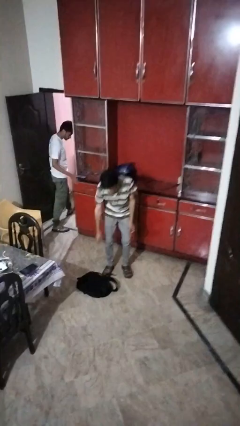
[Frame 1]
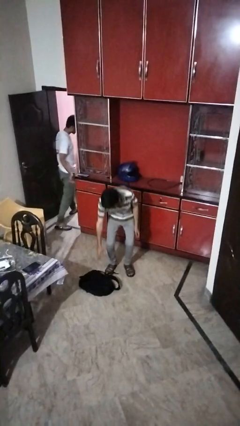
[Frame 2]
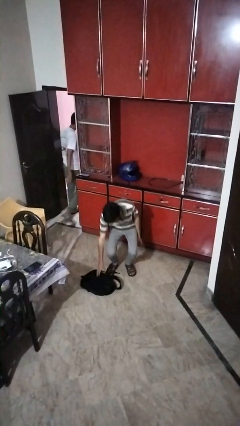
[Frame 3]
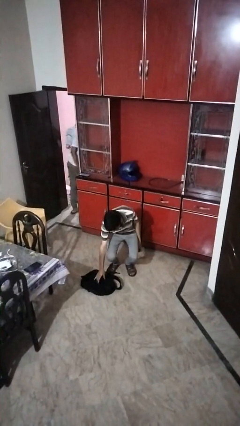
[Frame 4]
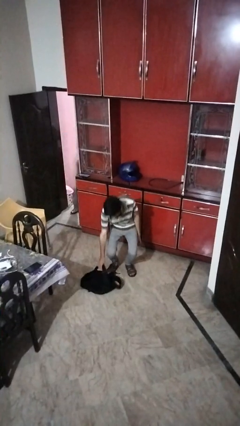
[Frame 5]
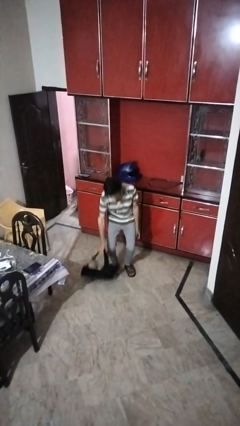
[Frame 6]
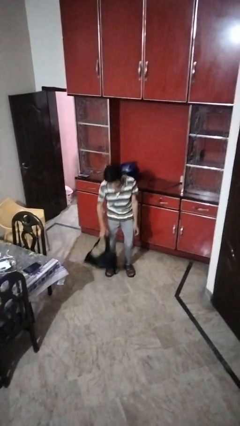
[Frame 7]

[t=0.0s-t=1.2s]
person picks up object from floor

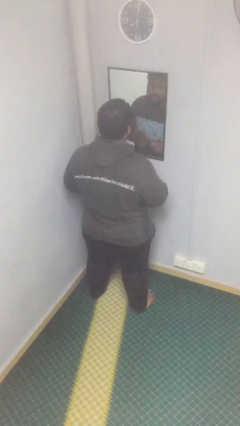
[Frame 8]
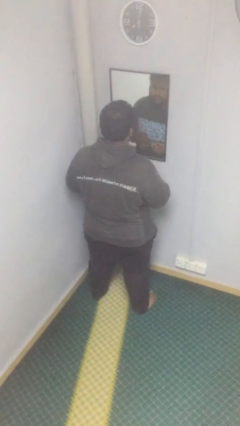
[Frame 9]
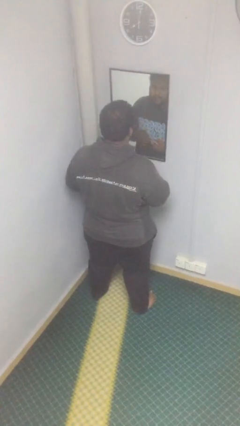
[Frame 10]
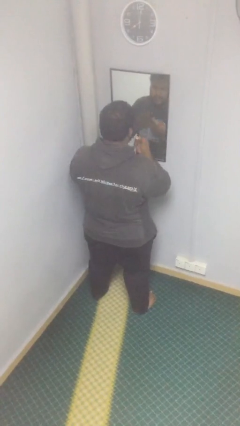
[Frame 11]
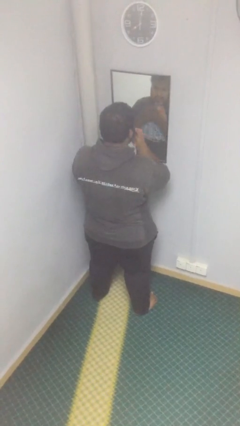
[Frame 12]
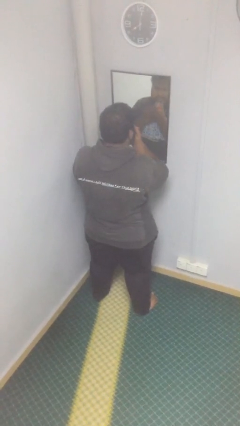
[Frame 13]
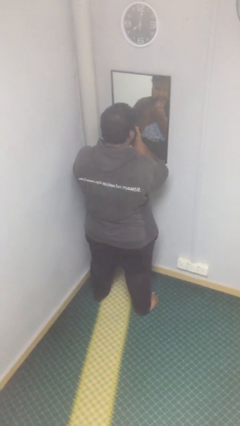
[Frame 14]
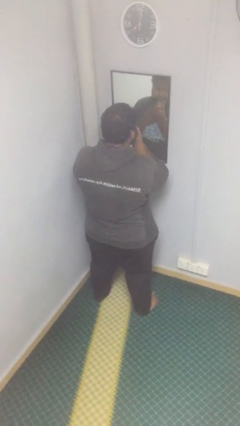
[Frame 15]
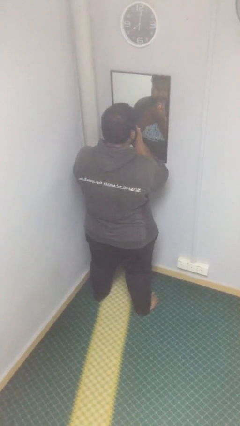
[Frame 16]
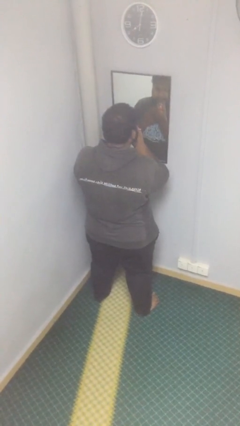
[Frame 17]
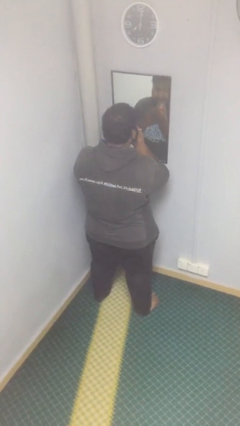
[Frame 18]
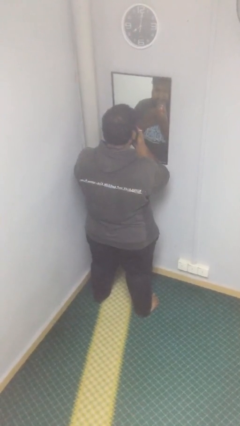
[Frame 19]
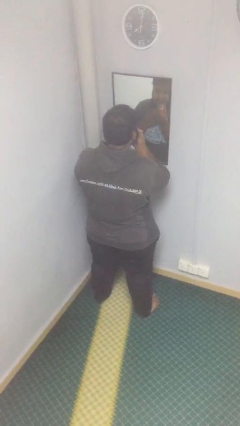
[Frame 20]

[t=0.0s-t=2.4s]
person applies lip makeup

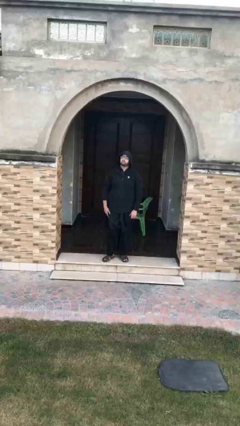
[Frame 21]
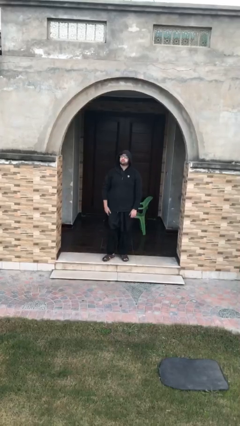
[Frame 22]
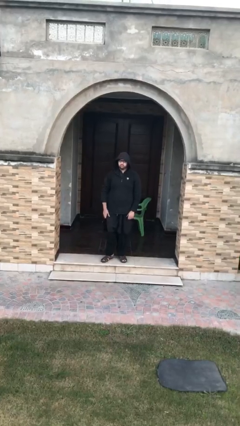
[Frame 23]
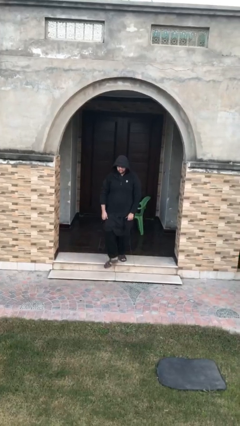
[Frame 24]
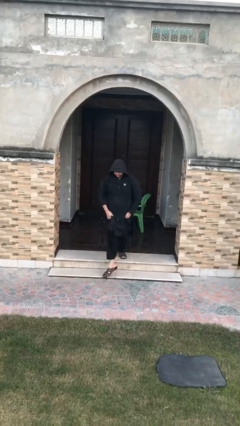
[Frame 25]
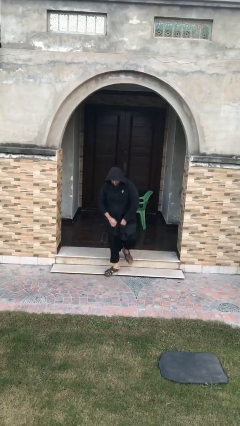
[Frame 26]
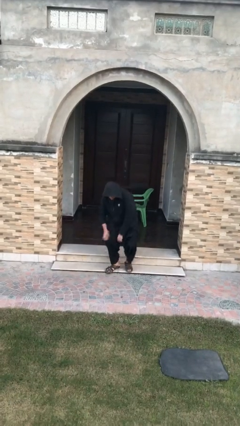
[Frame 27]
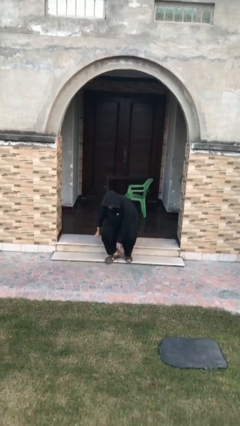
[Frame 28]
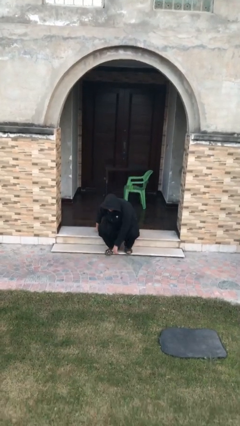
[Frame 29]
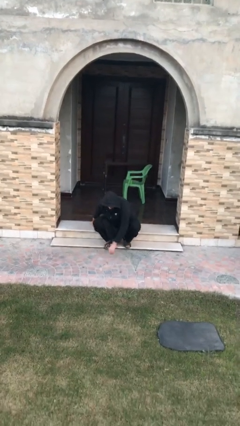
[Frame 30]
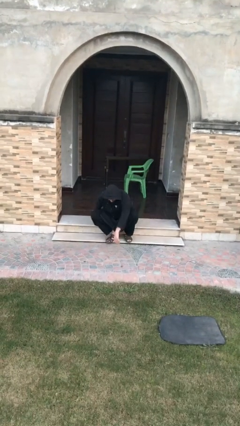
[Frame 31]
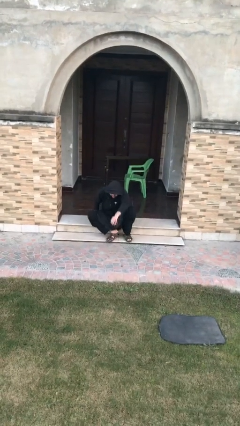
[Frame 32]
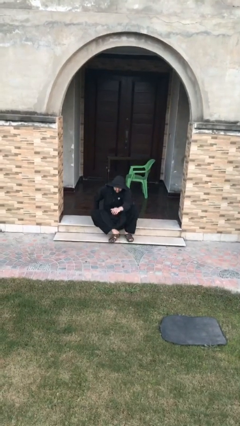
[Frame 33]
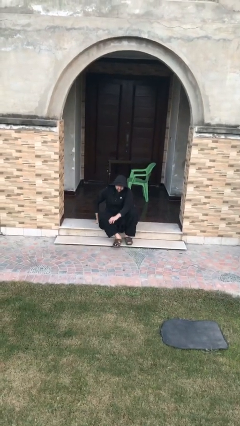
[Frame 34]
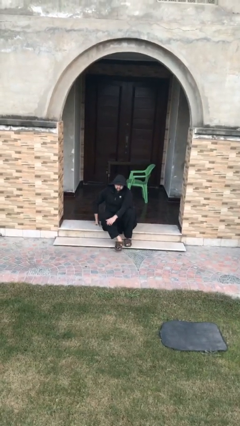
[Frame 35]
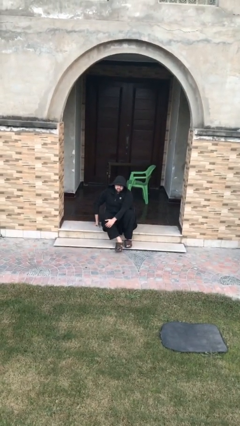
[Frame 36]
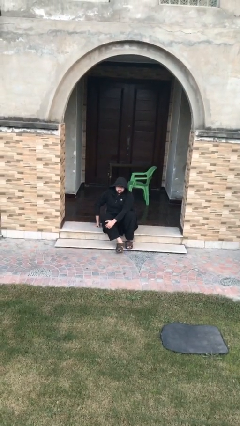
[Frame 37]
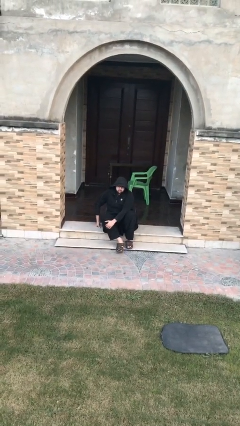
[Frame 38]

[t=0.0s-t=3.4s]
person sits down

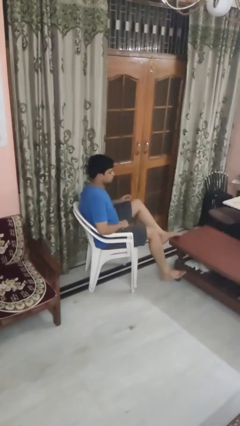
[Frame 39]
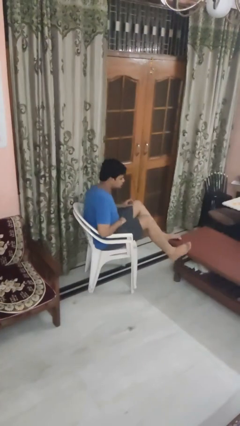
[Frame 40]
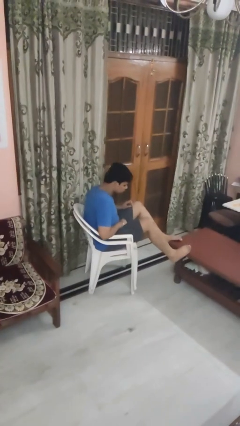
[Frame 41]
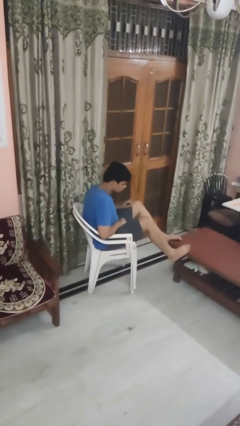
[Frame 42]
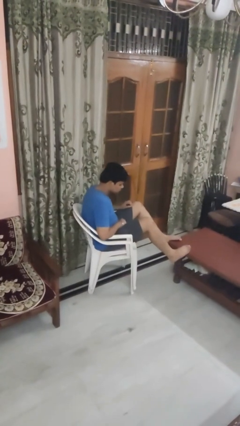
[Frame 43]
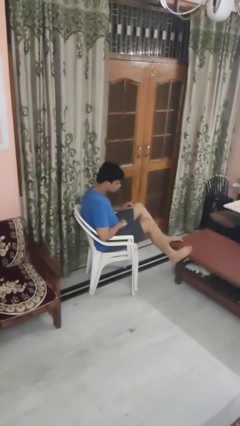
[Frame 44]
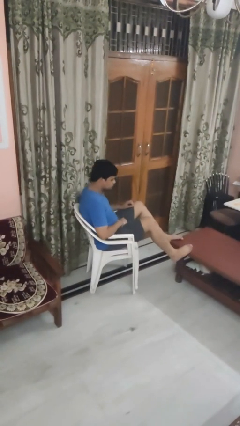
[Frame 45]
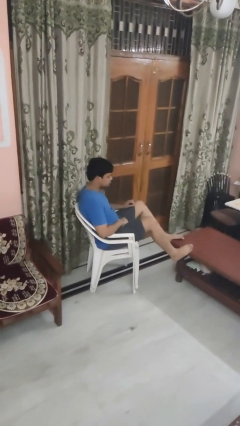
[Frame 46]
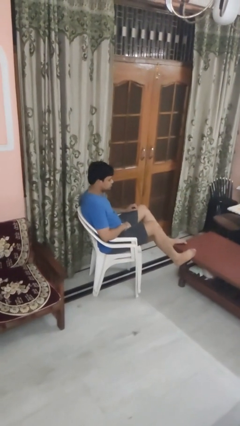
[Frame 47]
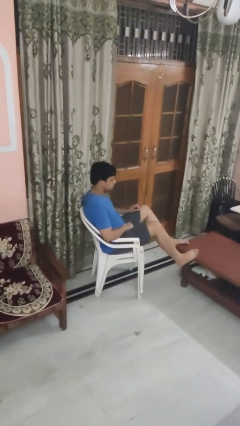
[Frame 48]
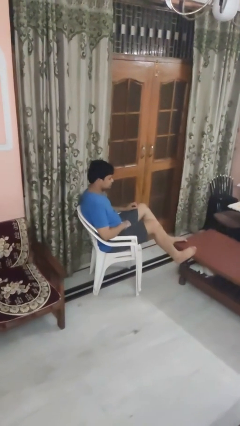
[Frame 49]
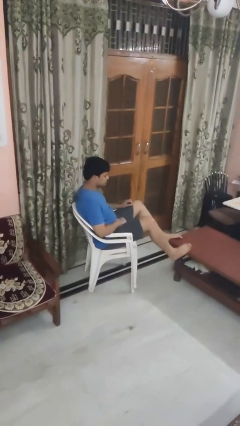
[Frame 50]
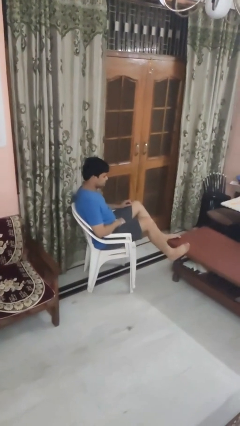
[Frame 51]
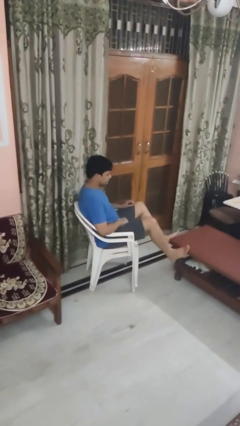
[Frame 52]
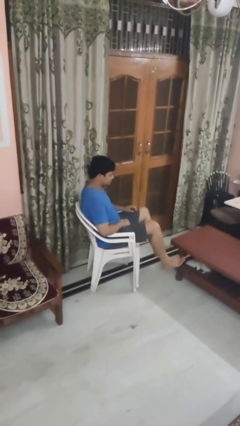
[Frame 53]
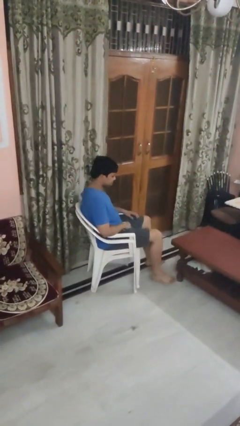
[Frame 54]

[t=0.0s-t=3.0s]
person puts feet up

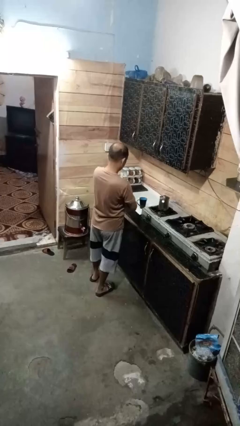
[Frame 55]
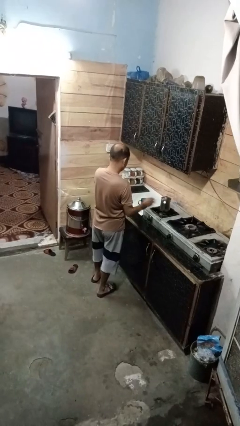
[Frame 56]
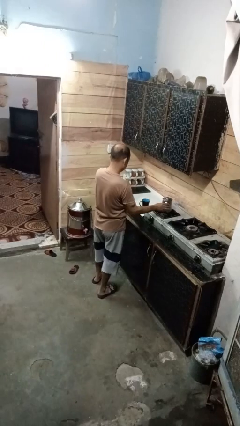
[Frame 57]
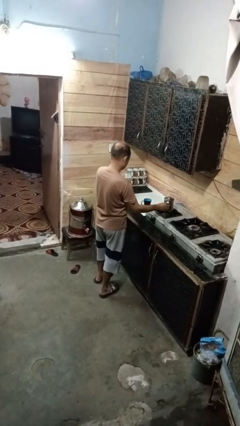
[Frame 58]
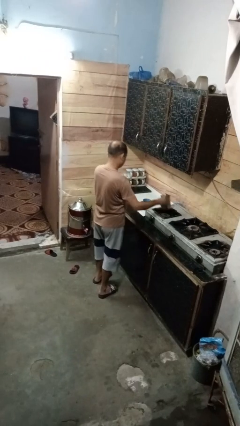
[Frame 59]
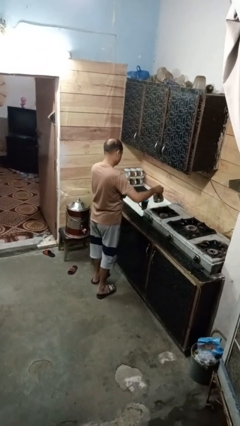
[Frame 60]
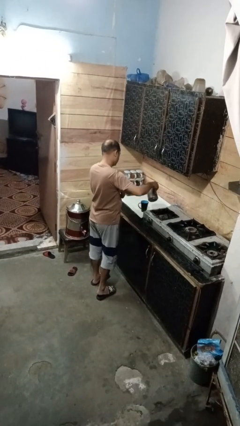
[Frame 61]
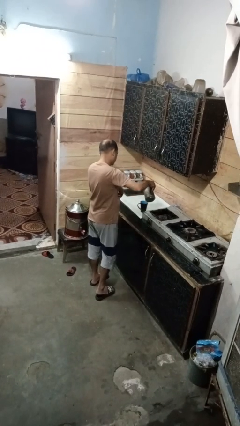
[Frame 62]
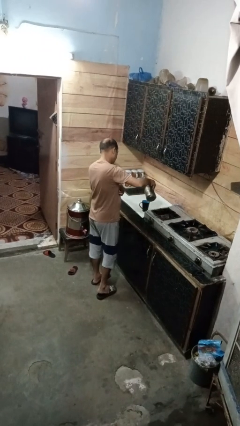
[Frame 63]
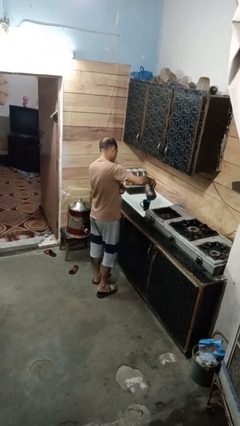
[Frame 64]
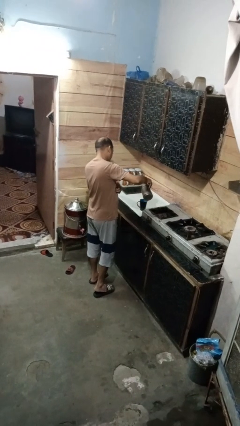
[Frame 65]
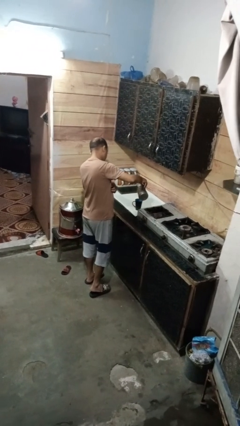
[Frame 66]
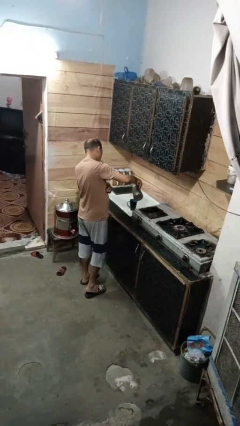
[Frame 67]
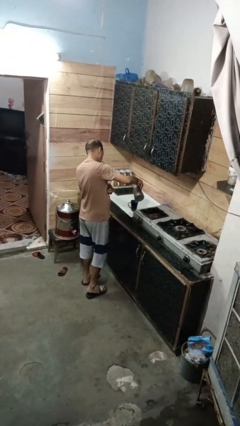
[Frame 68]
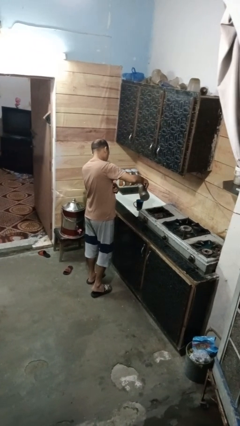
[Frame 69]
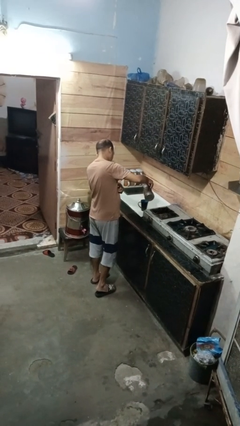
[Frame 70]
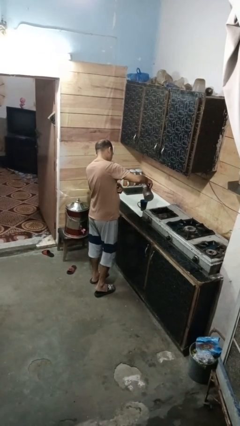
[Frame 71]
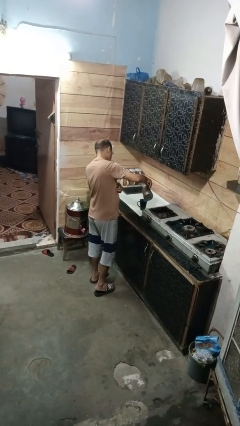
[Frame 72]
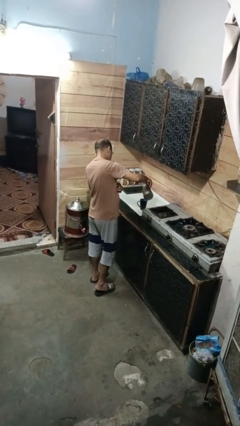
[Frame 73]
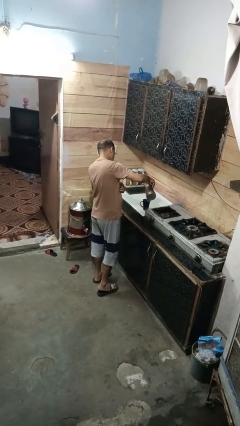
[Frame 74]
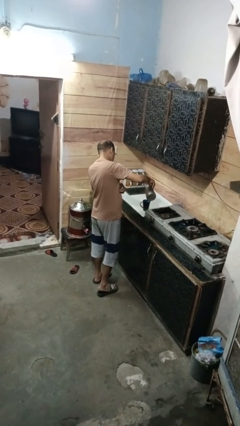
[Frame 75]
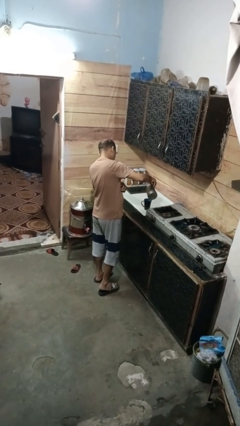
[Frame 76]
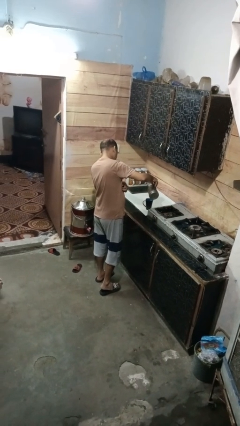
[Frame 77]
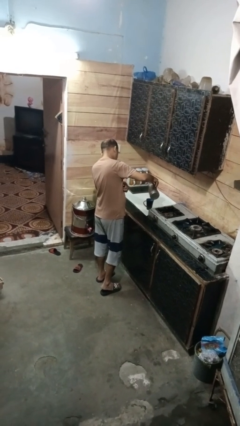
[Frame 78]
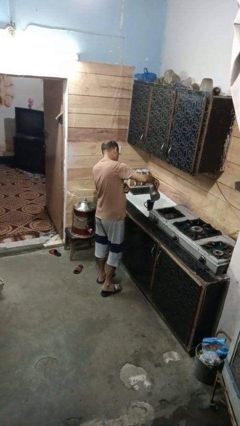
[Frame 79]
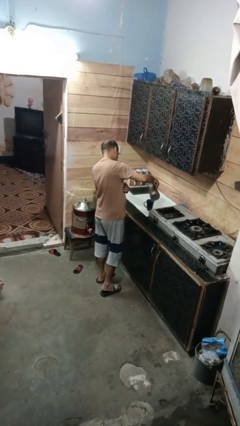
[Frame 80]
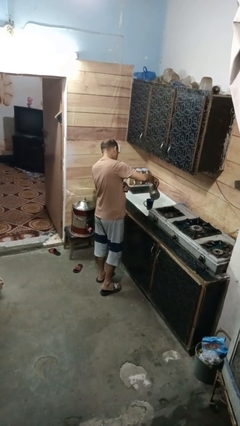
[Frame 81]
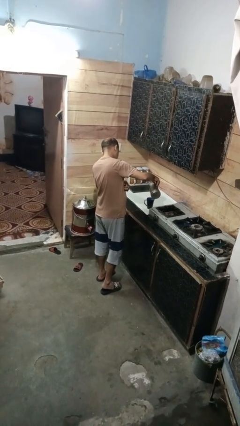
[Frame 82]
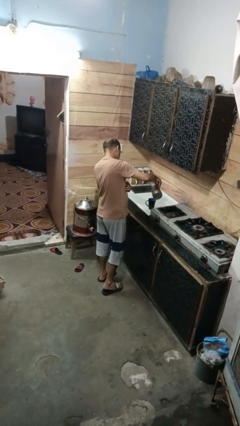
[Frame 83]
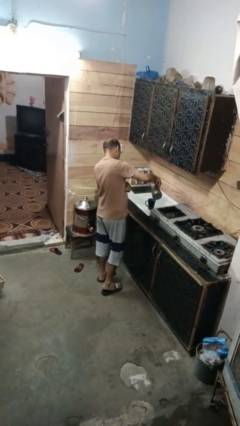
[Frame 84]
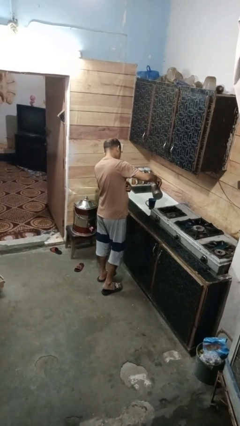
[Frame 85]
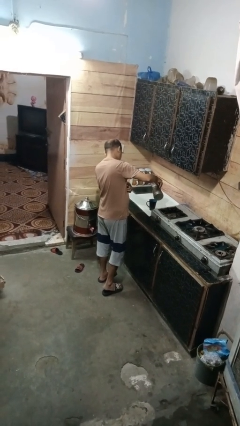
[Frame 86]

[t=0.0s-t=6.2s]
person pours coffee into mug

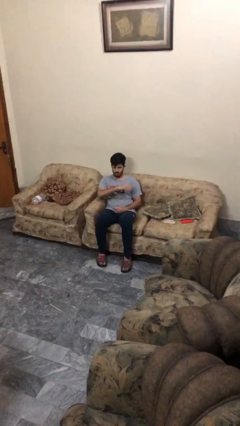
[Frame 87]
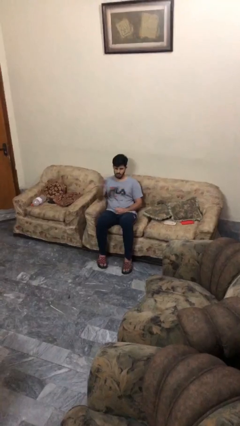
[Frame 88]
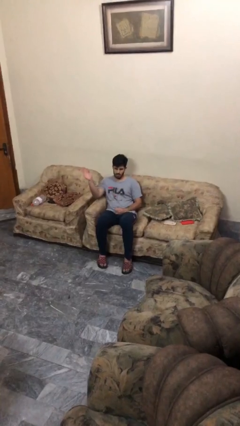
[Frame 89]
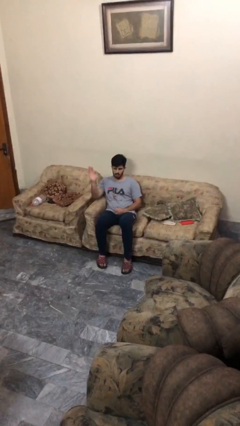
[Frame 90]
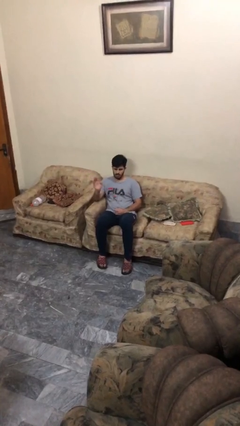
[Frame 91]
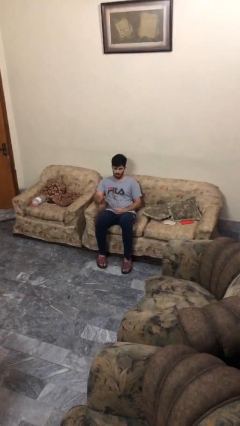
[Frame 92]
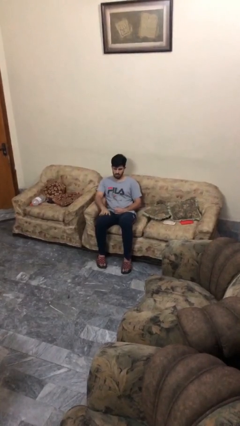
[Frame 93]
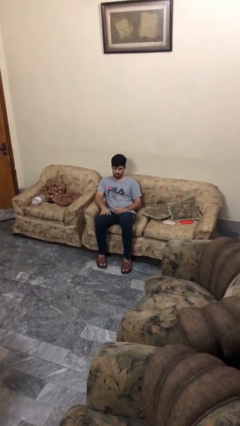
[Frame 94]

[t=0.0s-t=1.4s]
person gestures swipe right
